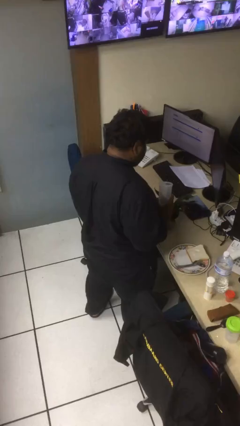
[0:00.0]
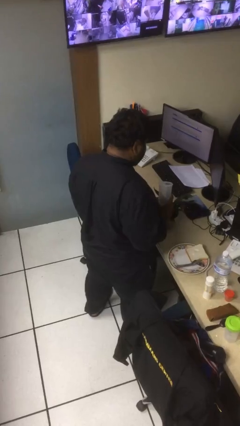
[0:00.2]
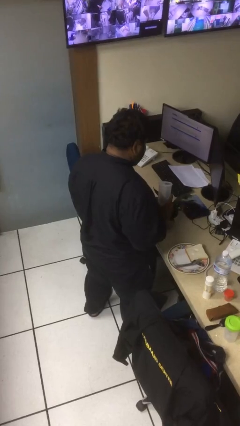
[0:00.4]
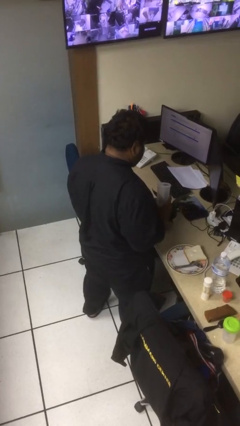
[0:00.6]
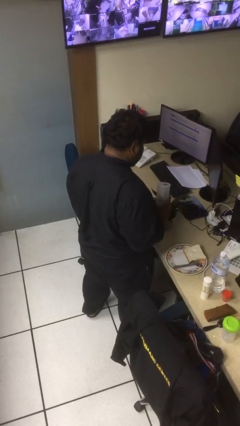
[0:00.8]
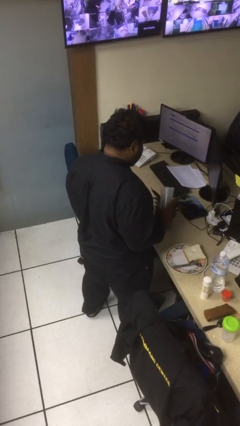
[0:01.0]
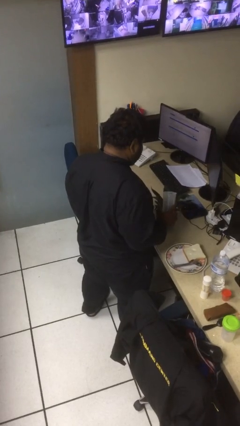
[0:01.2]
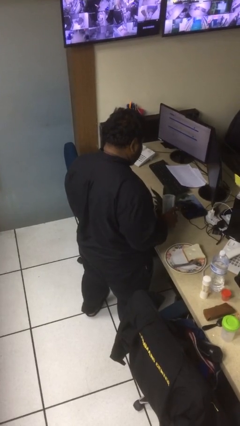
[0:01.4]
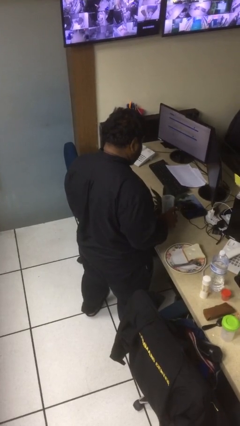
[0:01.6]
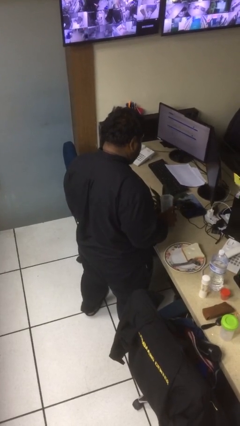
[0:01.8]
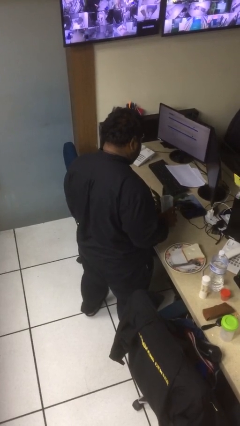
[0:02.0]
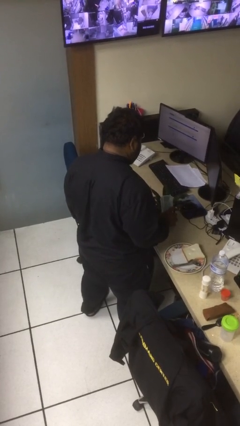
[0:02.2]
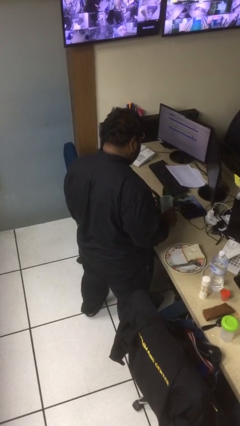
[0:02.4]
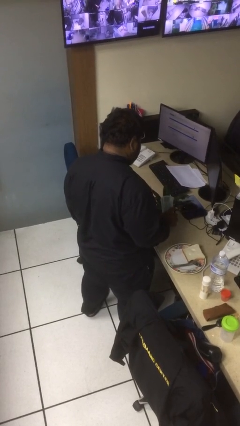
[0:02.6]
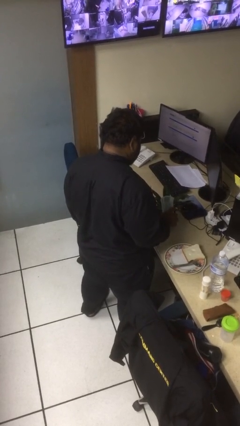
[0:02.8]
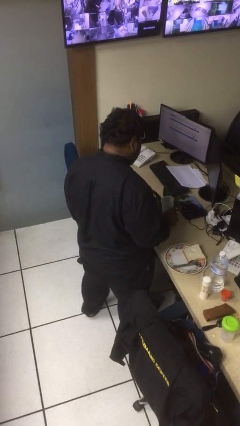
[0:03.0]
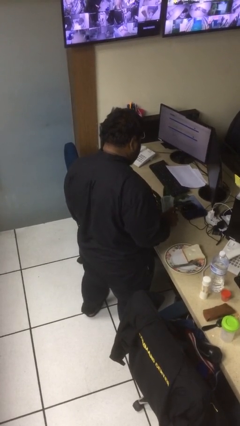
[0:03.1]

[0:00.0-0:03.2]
person waters houseplant

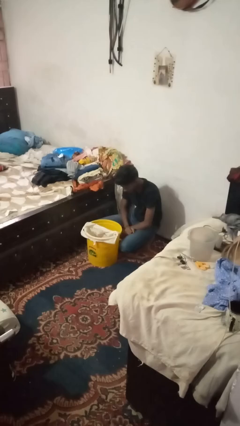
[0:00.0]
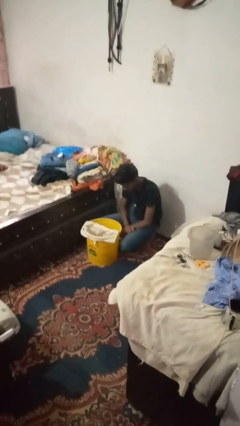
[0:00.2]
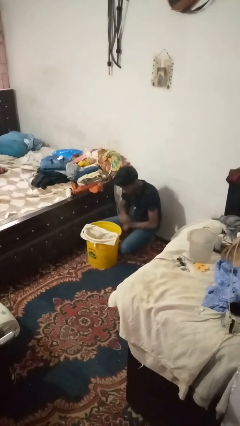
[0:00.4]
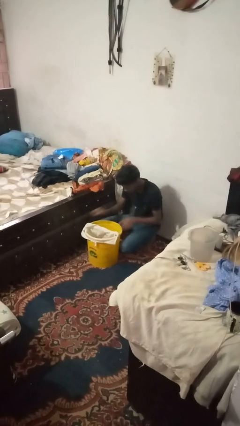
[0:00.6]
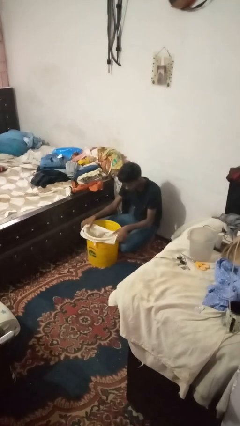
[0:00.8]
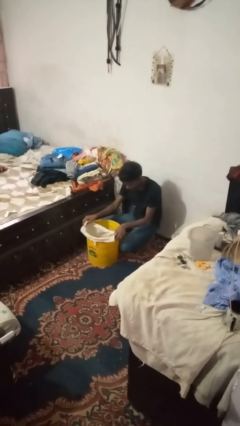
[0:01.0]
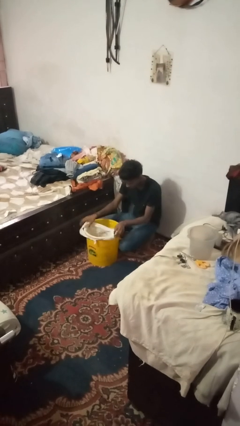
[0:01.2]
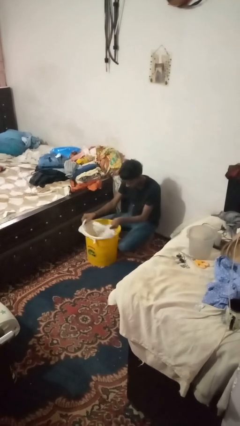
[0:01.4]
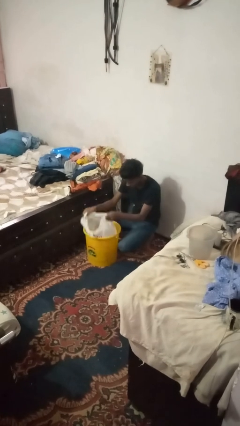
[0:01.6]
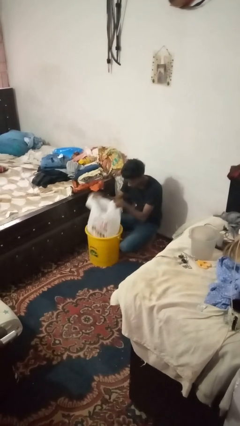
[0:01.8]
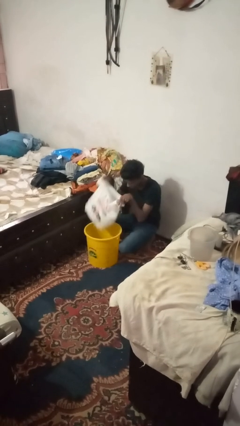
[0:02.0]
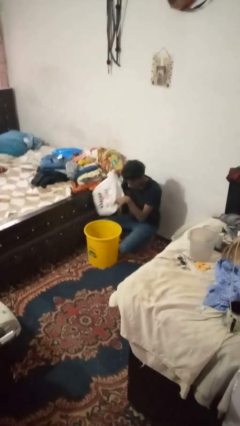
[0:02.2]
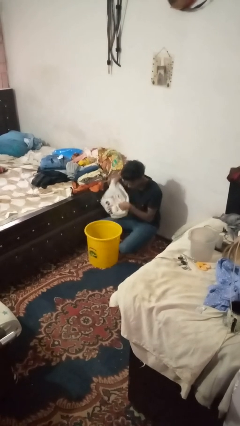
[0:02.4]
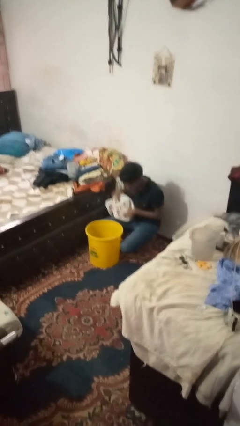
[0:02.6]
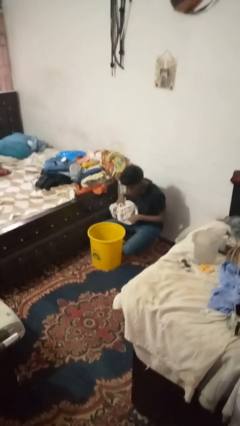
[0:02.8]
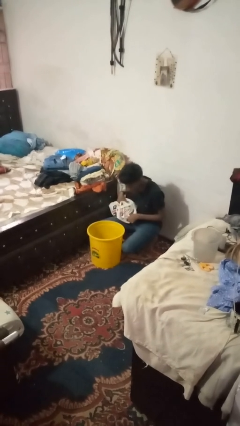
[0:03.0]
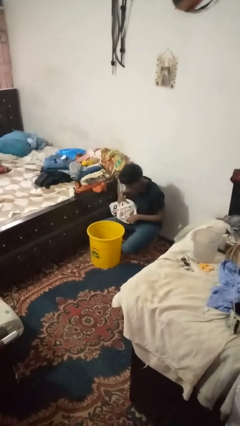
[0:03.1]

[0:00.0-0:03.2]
person removes trashbag from trashcan

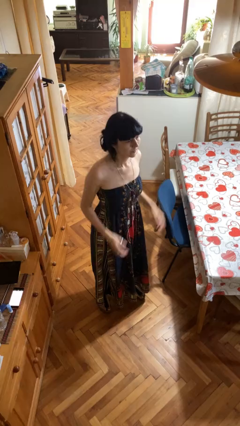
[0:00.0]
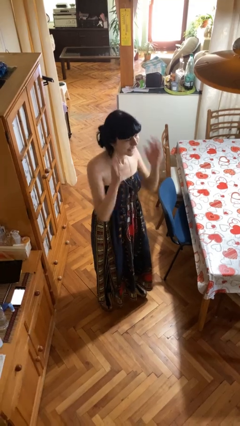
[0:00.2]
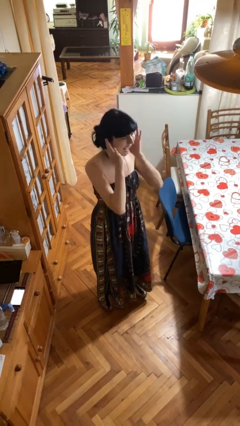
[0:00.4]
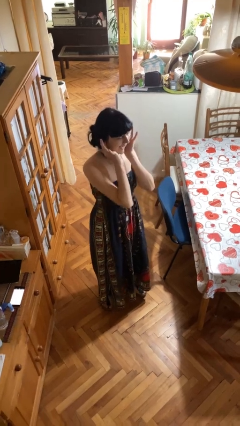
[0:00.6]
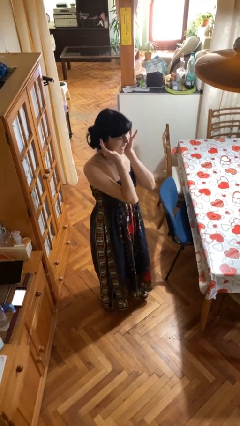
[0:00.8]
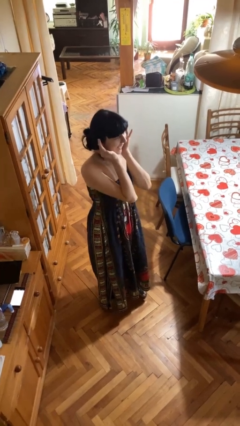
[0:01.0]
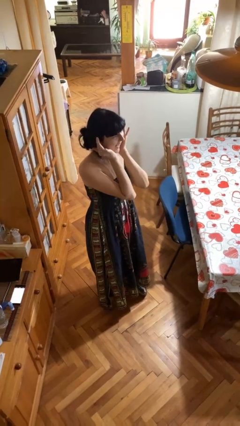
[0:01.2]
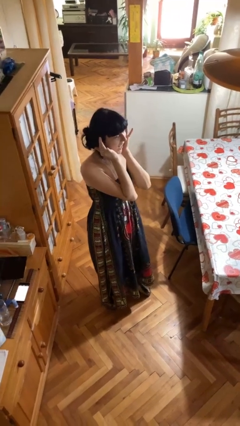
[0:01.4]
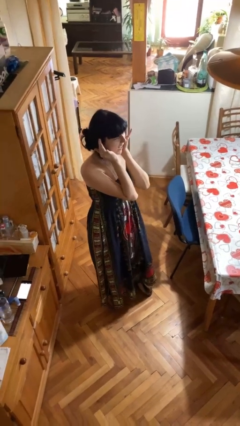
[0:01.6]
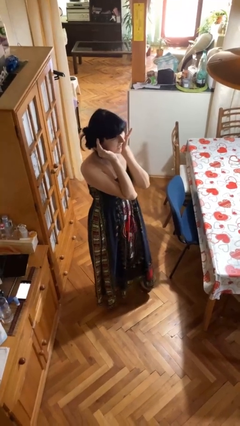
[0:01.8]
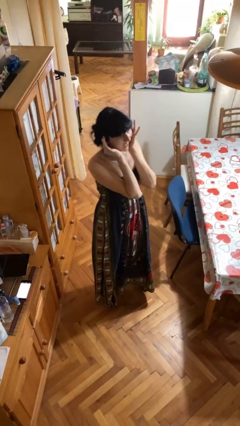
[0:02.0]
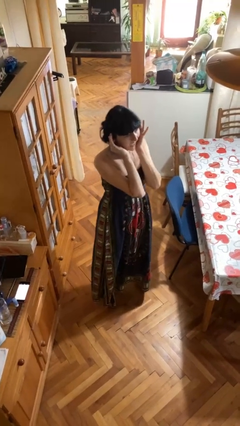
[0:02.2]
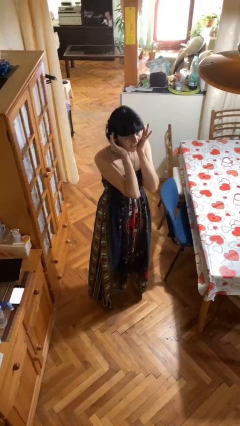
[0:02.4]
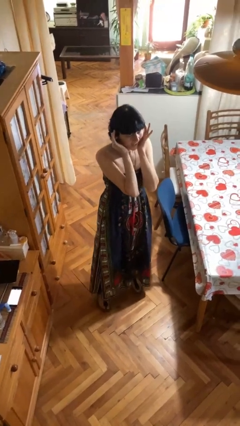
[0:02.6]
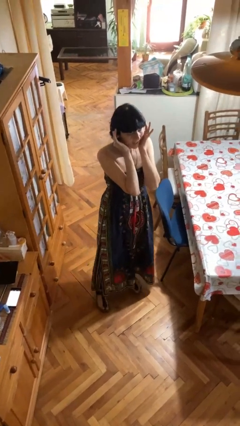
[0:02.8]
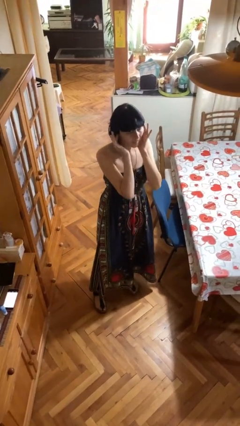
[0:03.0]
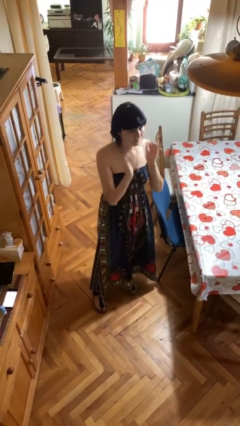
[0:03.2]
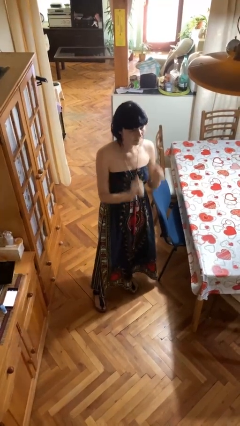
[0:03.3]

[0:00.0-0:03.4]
person puts fingers in ear

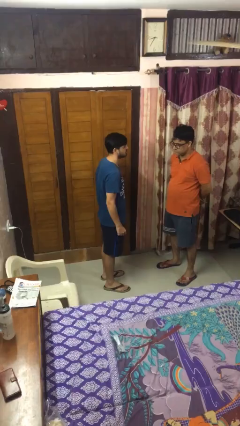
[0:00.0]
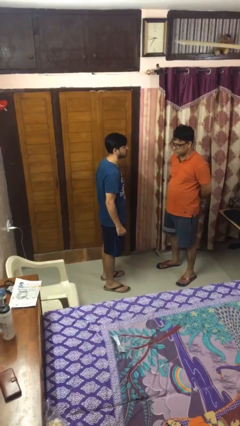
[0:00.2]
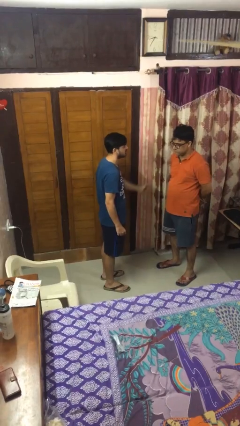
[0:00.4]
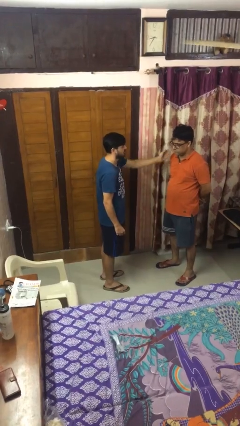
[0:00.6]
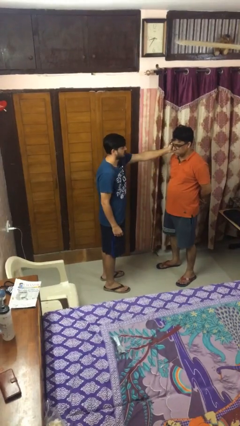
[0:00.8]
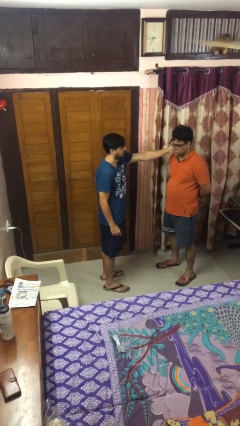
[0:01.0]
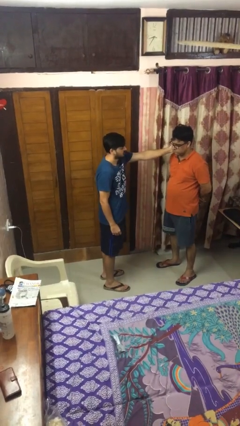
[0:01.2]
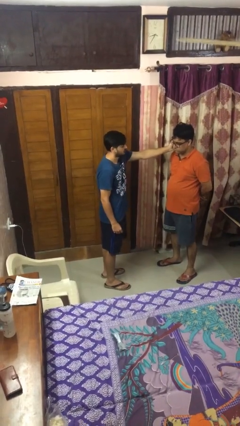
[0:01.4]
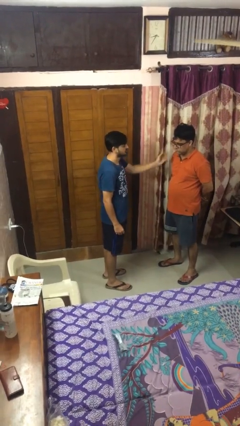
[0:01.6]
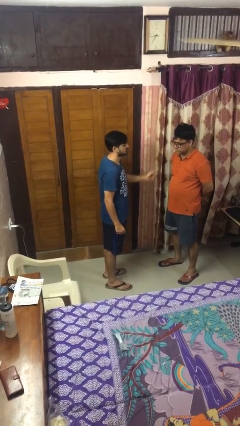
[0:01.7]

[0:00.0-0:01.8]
person touches face of person

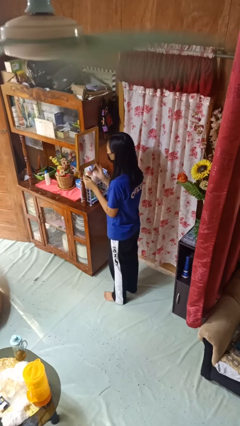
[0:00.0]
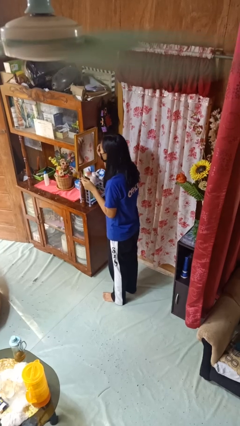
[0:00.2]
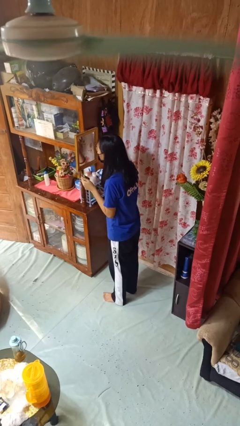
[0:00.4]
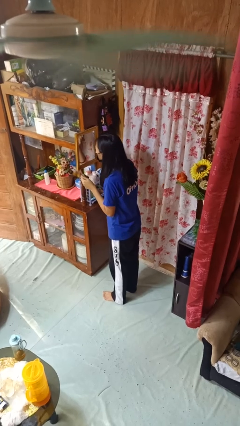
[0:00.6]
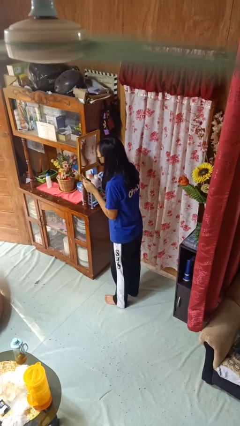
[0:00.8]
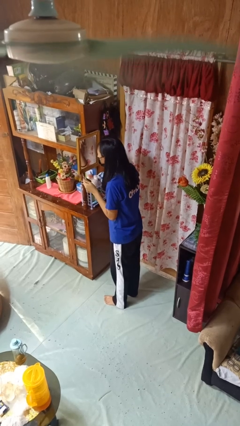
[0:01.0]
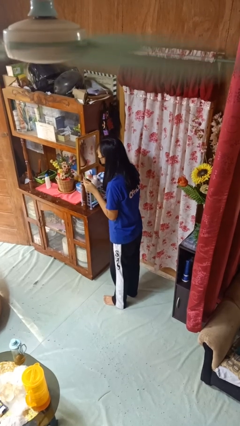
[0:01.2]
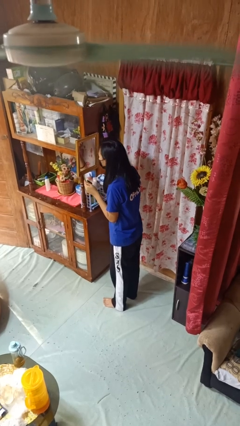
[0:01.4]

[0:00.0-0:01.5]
person applies eye makeup

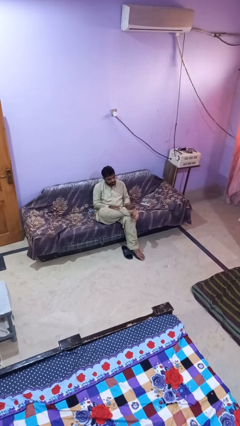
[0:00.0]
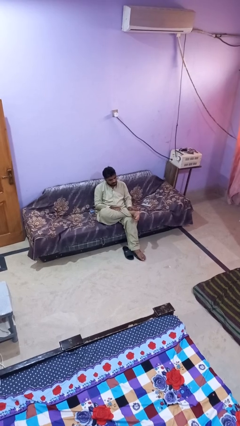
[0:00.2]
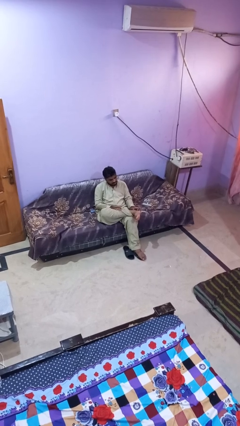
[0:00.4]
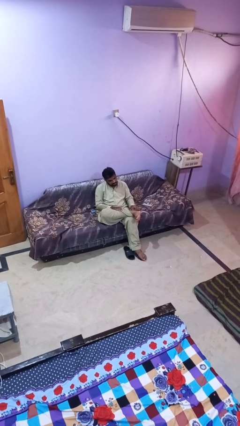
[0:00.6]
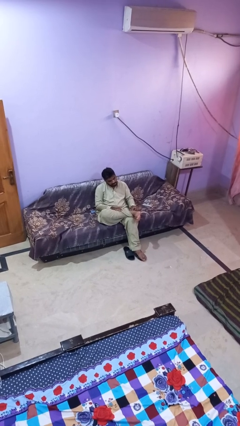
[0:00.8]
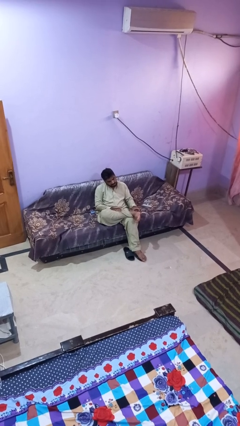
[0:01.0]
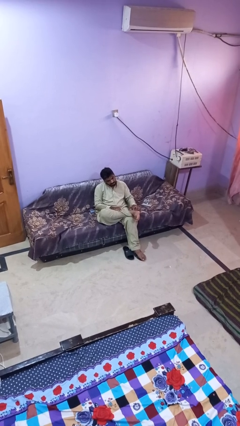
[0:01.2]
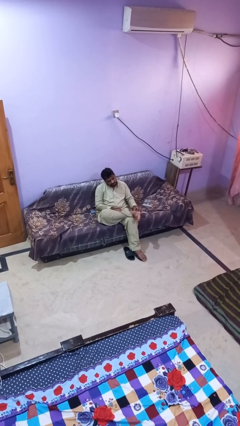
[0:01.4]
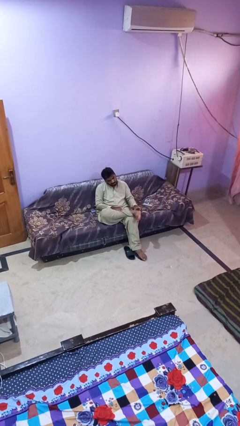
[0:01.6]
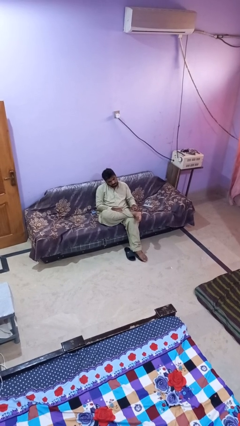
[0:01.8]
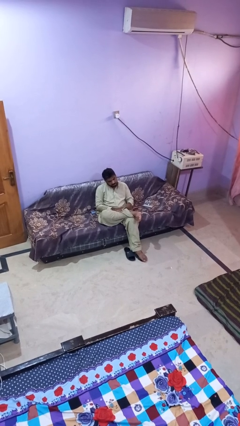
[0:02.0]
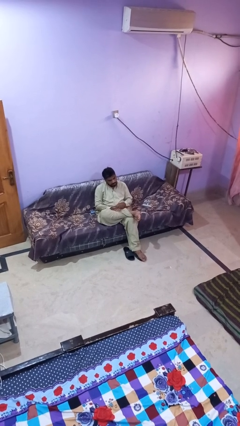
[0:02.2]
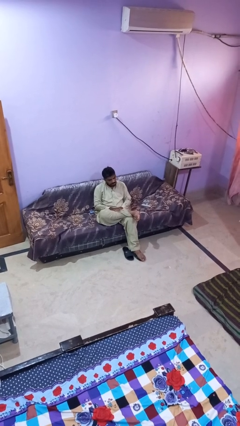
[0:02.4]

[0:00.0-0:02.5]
person rubs foot

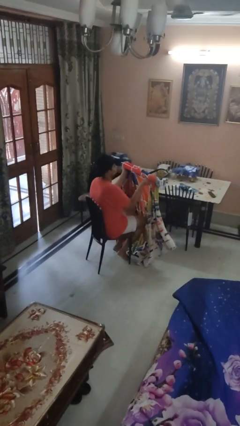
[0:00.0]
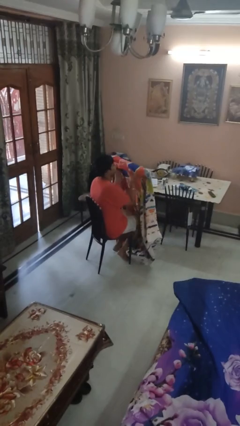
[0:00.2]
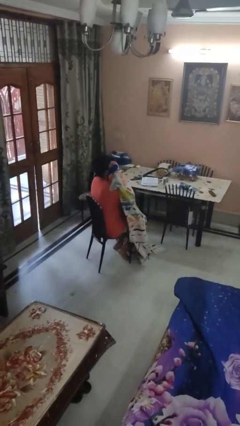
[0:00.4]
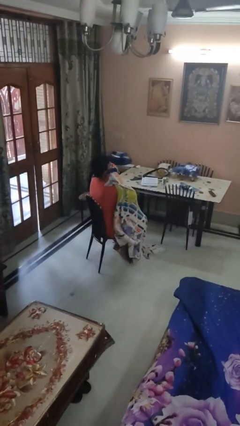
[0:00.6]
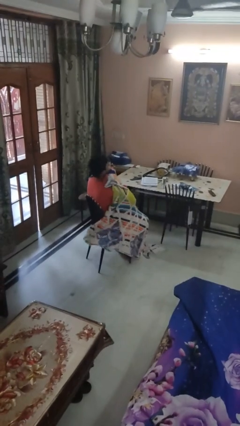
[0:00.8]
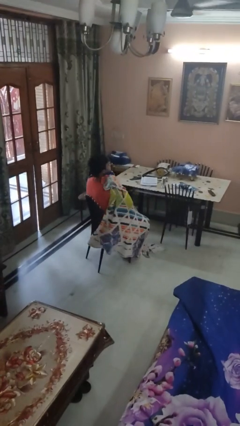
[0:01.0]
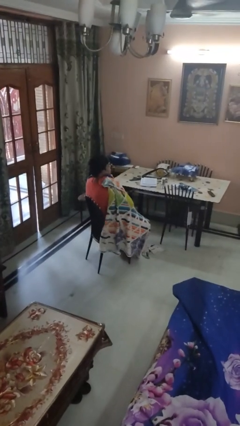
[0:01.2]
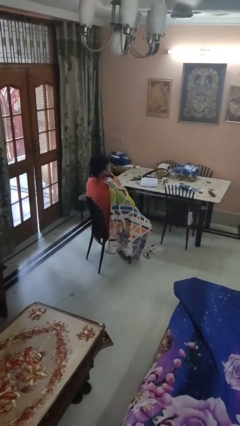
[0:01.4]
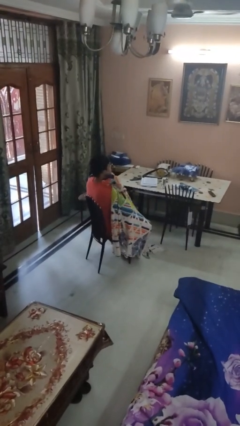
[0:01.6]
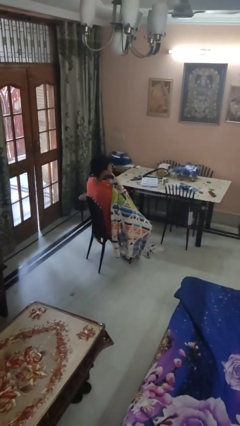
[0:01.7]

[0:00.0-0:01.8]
person covers with blanket
